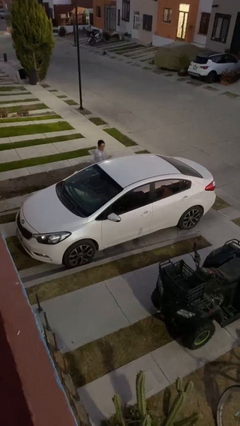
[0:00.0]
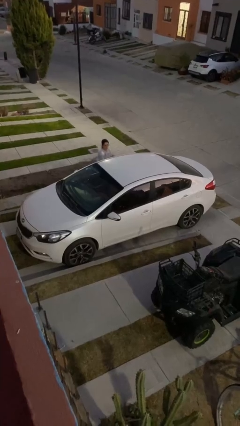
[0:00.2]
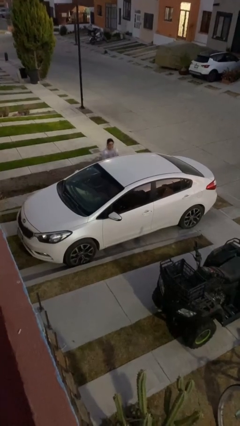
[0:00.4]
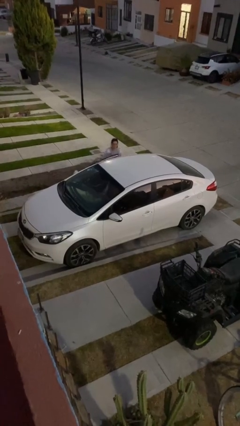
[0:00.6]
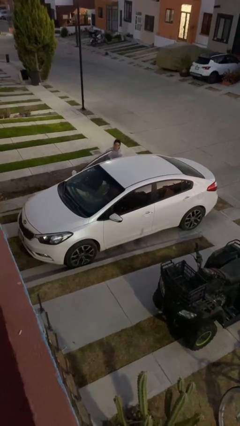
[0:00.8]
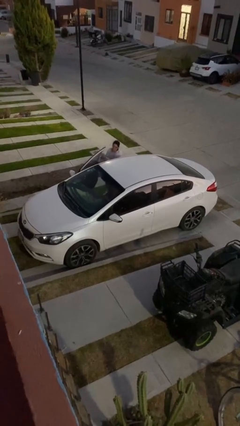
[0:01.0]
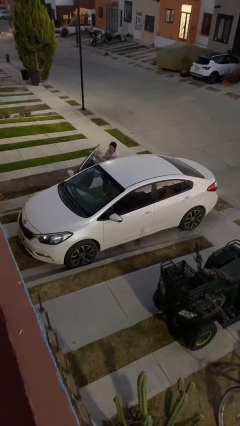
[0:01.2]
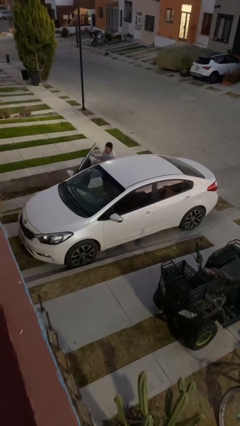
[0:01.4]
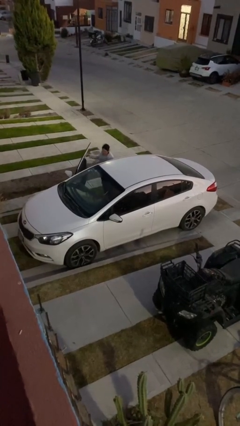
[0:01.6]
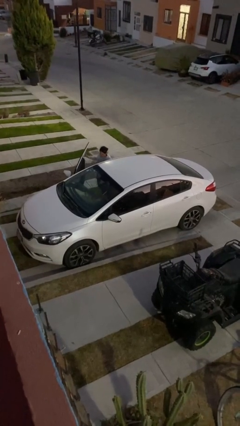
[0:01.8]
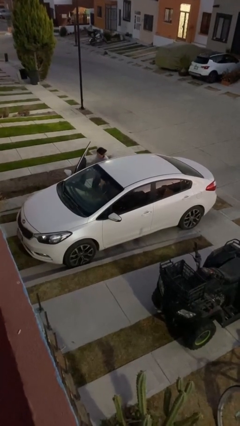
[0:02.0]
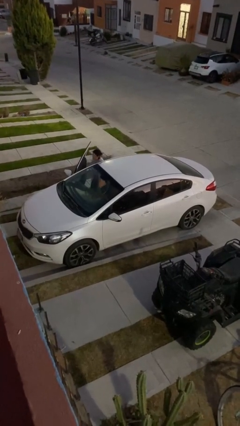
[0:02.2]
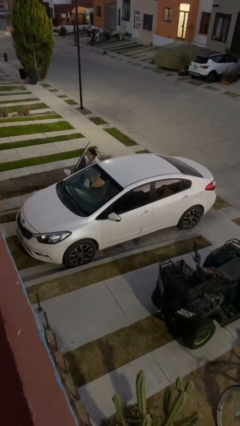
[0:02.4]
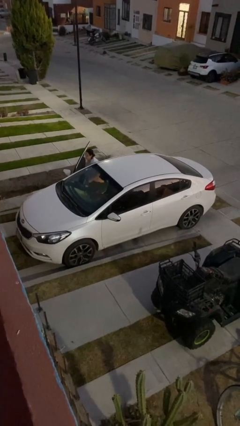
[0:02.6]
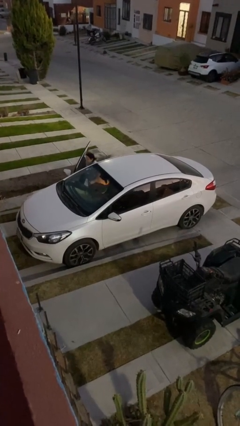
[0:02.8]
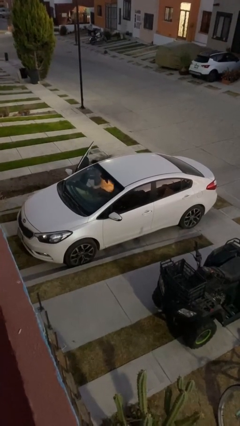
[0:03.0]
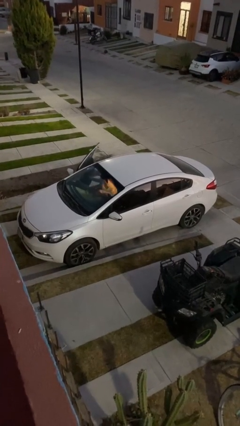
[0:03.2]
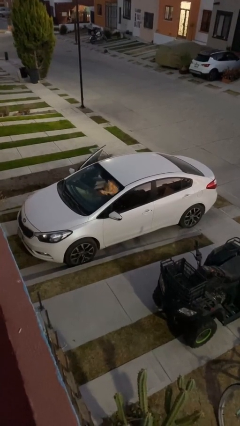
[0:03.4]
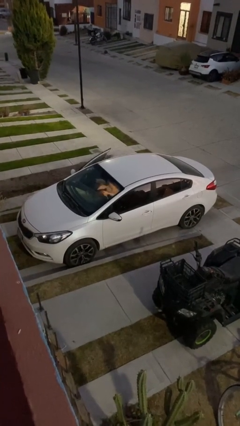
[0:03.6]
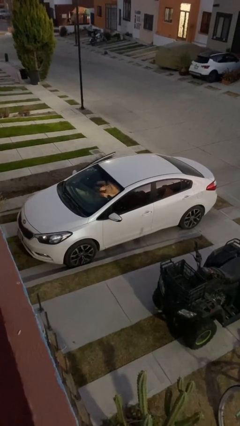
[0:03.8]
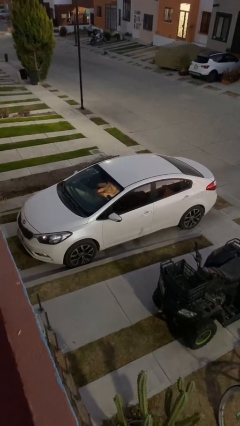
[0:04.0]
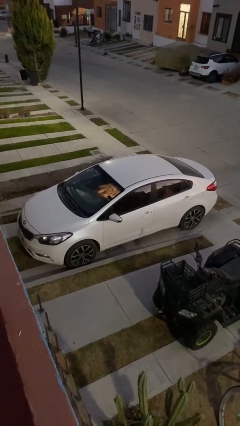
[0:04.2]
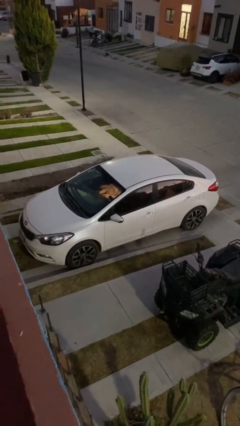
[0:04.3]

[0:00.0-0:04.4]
car picks up person

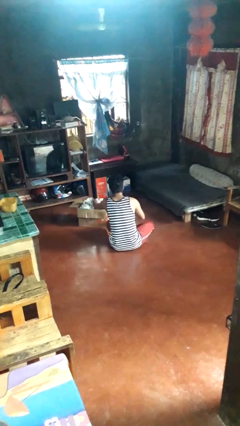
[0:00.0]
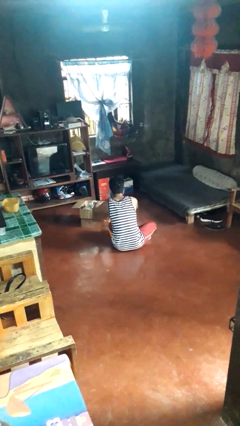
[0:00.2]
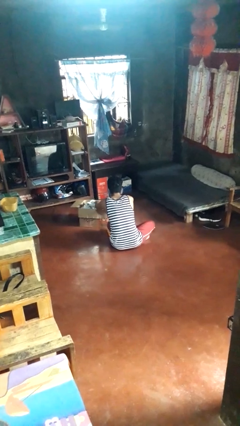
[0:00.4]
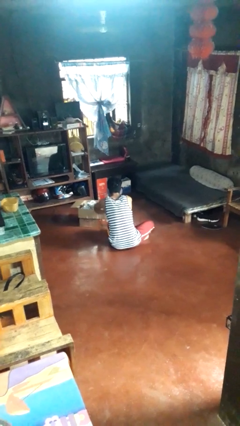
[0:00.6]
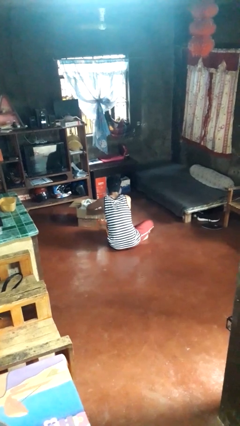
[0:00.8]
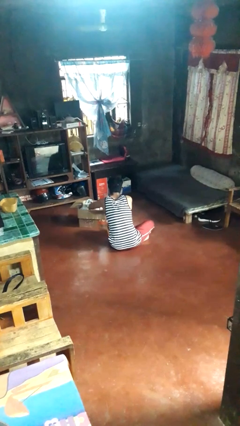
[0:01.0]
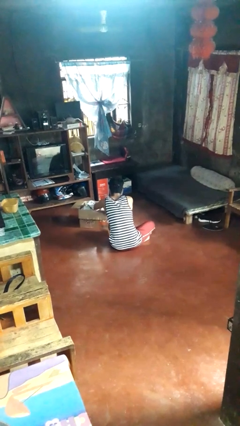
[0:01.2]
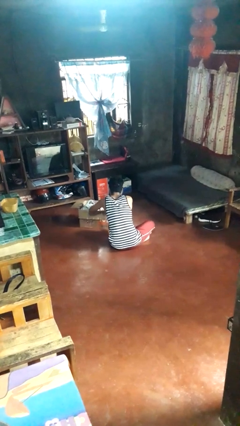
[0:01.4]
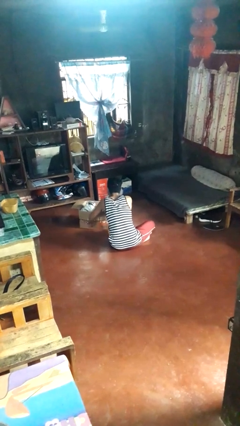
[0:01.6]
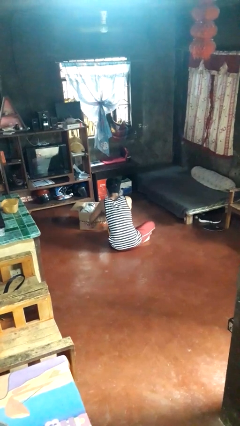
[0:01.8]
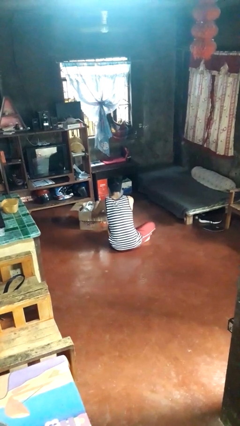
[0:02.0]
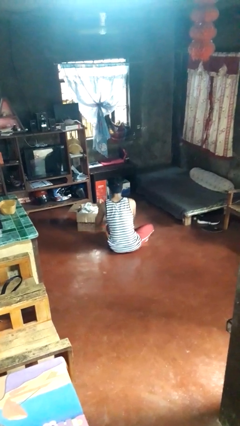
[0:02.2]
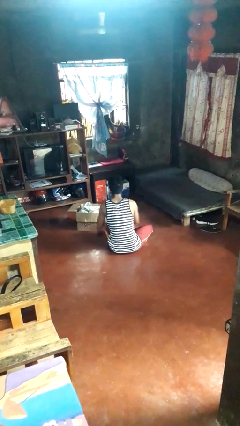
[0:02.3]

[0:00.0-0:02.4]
person searches in box

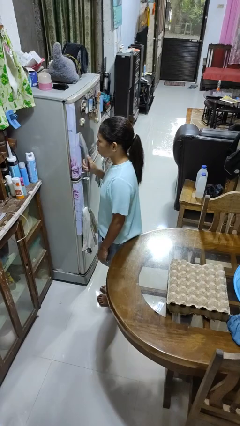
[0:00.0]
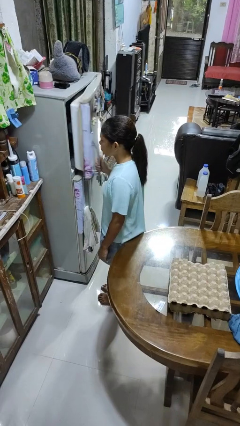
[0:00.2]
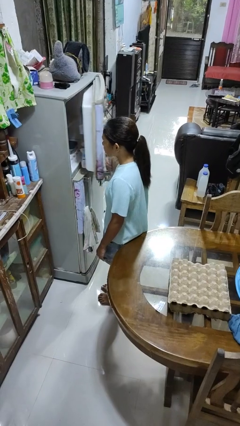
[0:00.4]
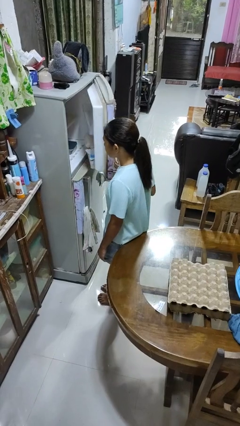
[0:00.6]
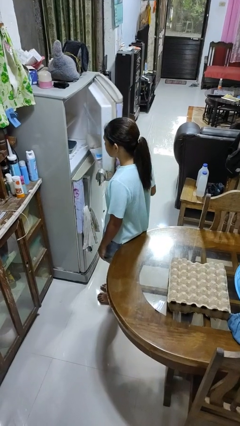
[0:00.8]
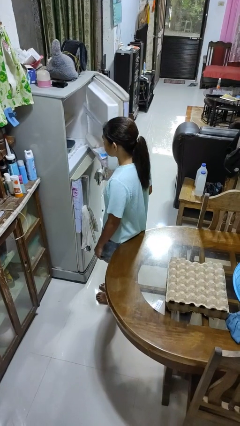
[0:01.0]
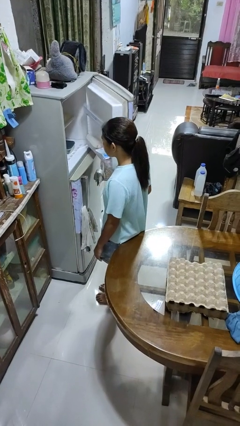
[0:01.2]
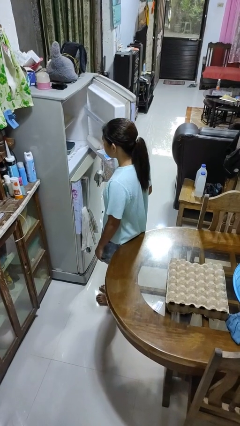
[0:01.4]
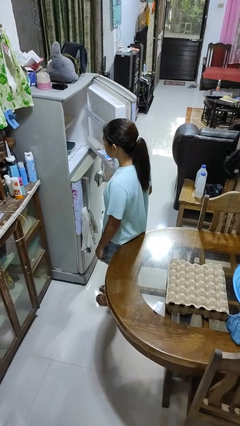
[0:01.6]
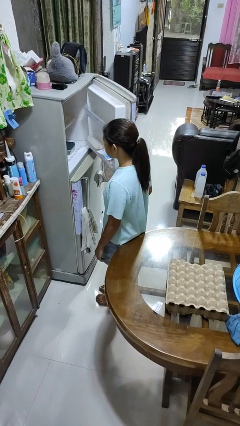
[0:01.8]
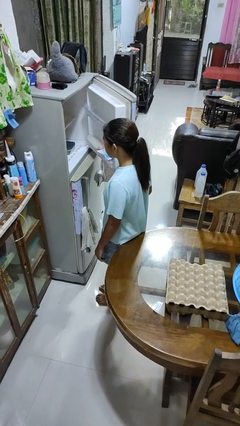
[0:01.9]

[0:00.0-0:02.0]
person opens refrigerator

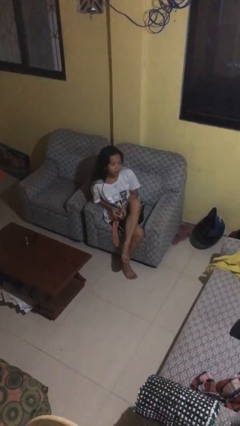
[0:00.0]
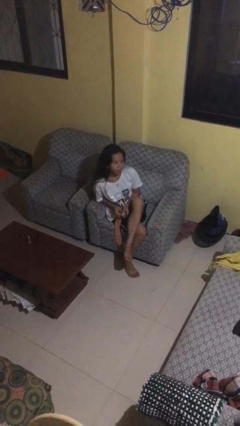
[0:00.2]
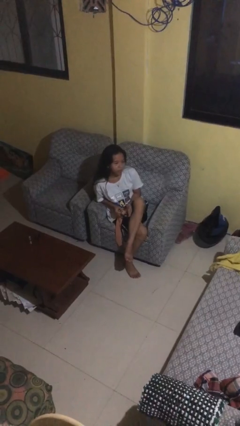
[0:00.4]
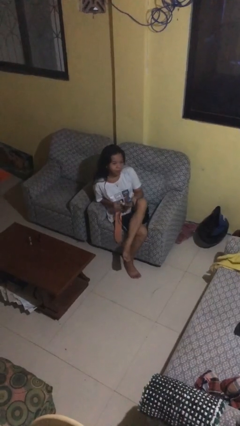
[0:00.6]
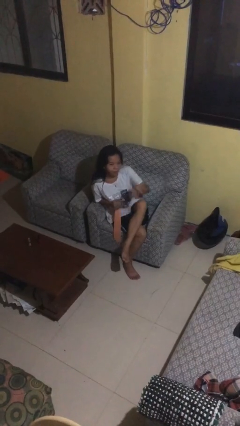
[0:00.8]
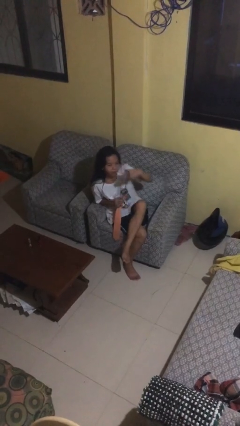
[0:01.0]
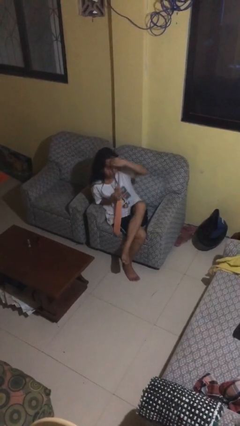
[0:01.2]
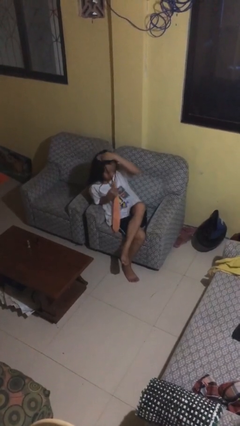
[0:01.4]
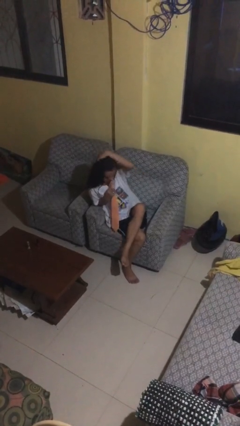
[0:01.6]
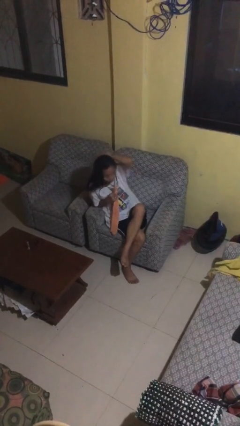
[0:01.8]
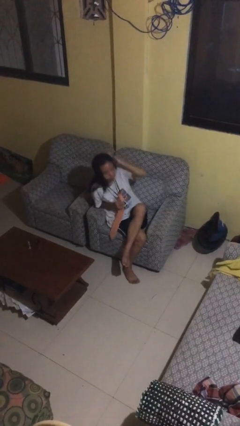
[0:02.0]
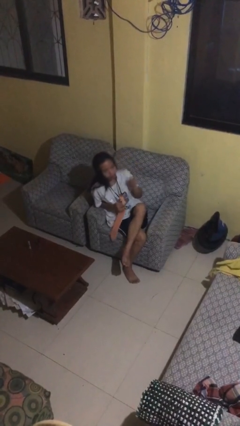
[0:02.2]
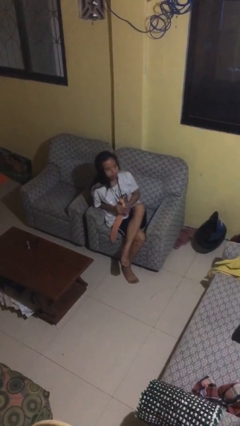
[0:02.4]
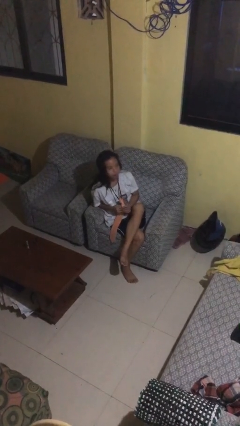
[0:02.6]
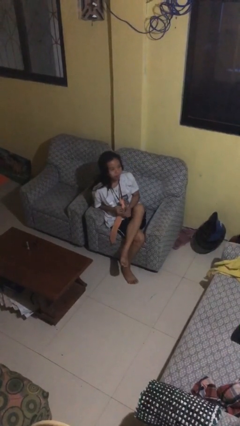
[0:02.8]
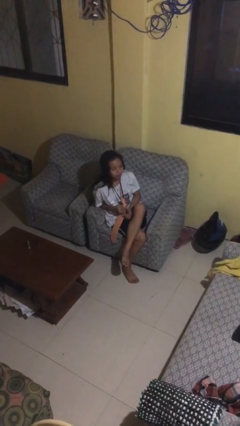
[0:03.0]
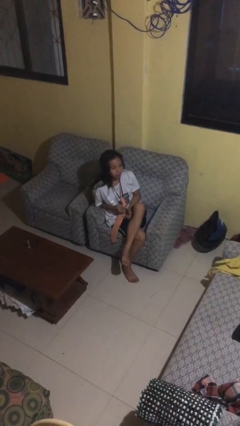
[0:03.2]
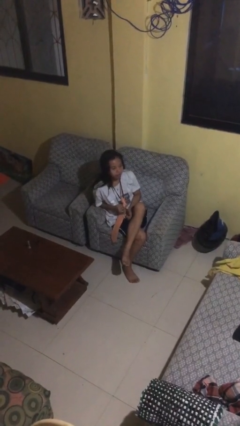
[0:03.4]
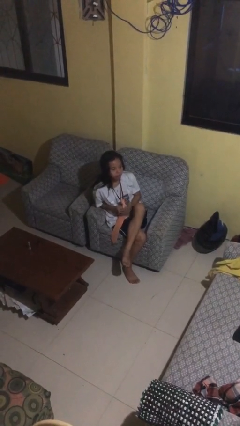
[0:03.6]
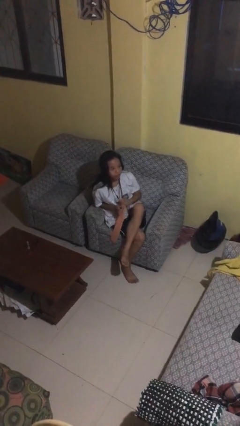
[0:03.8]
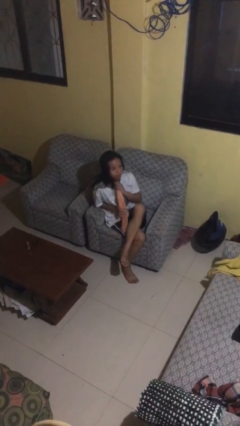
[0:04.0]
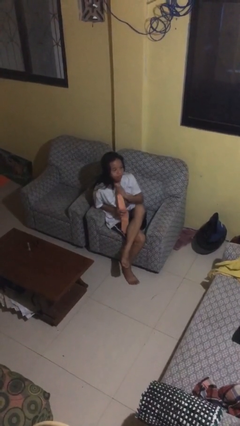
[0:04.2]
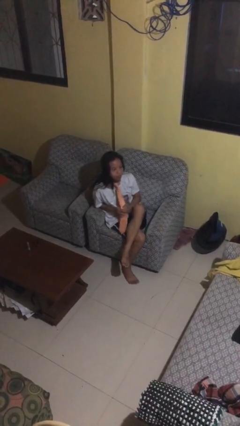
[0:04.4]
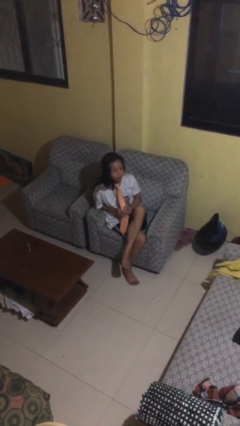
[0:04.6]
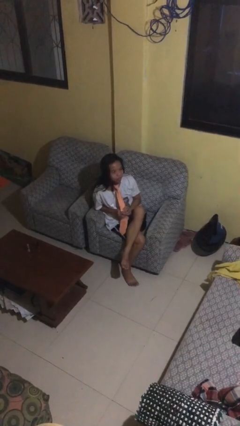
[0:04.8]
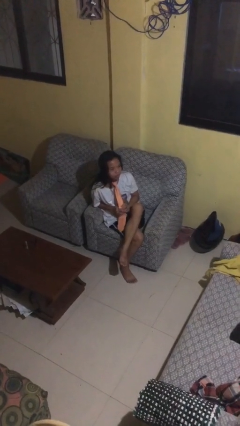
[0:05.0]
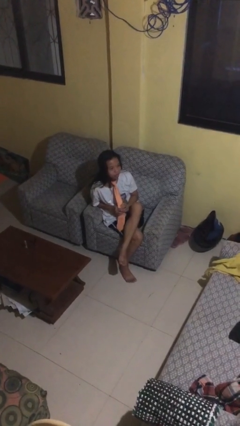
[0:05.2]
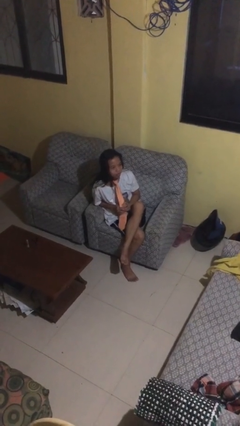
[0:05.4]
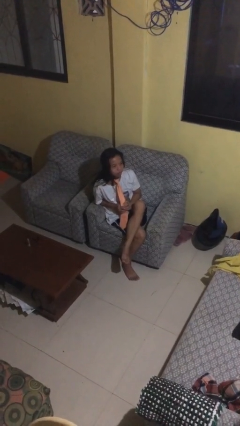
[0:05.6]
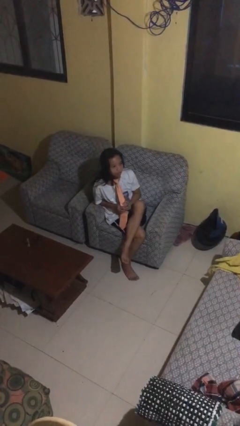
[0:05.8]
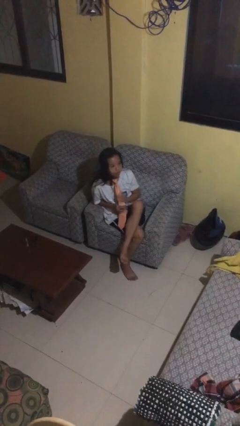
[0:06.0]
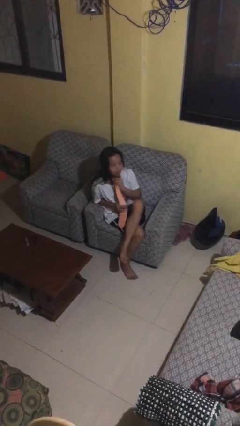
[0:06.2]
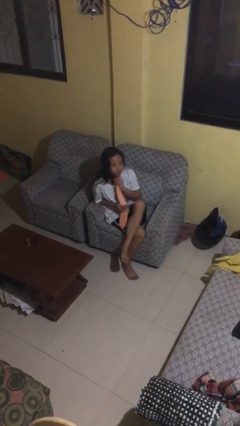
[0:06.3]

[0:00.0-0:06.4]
person puts on necktie

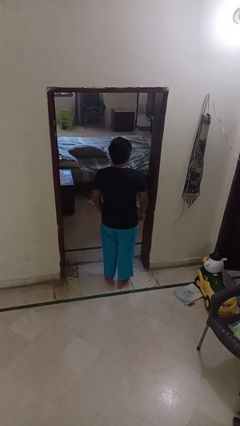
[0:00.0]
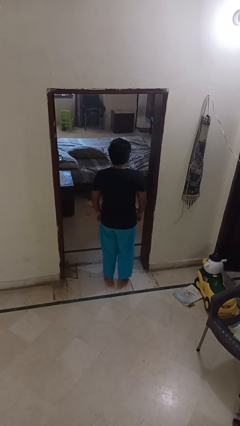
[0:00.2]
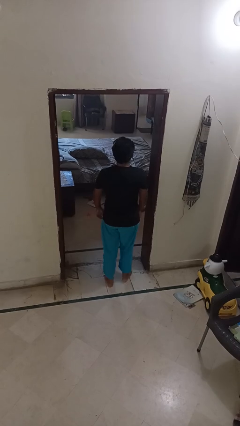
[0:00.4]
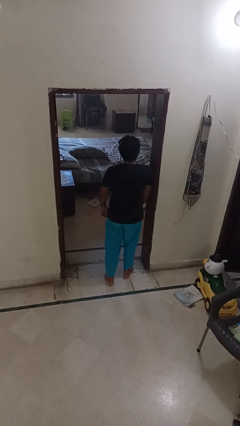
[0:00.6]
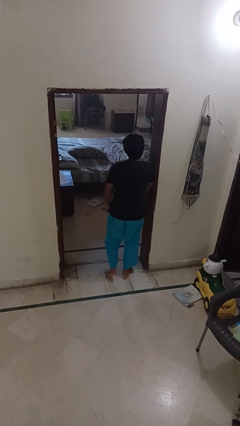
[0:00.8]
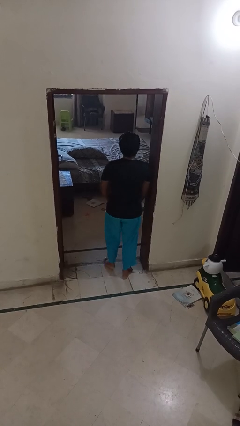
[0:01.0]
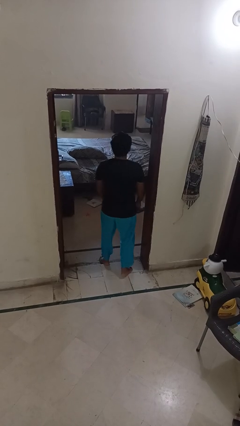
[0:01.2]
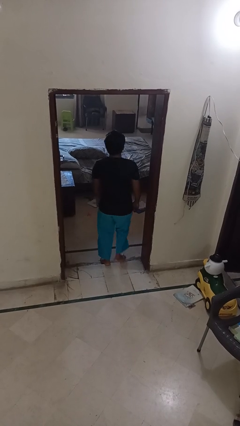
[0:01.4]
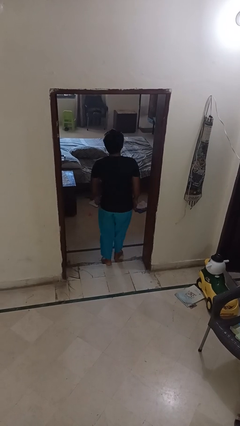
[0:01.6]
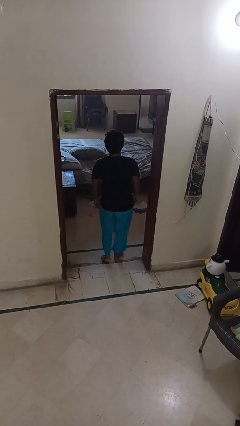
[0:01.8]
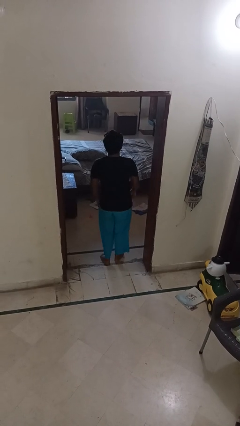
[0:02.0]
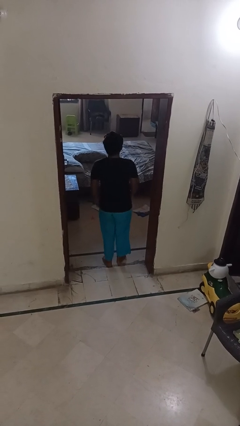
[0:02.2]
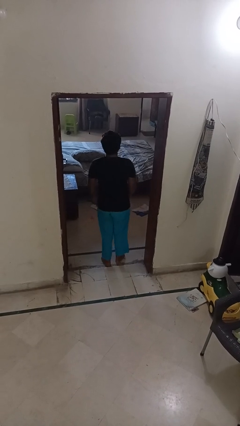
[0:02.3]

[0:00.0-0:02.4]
person bumps into wall
